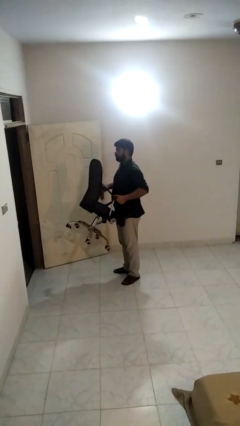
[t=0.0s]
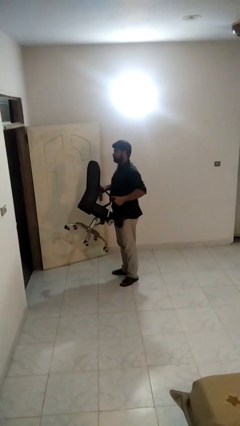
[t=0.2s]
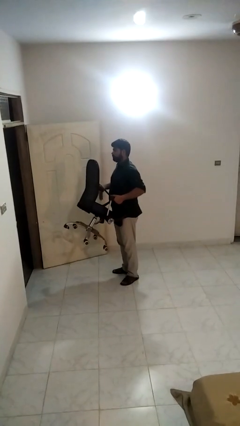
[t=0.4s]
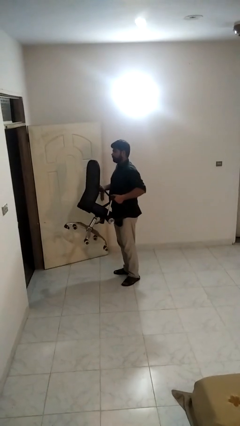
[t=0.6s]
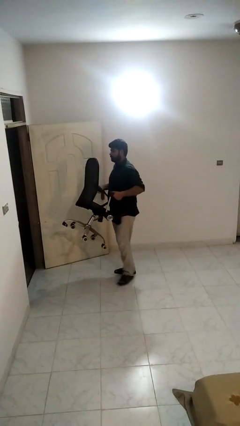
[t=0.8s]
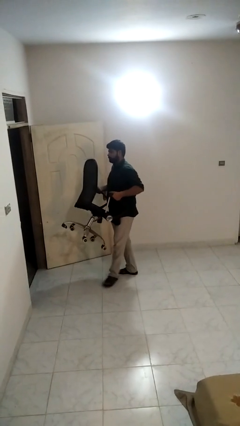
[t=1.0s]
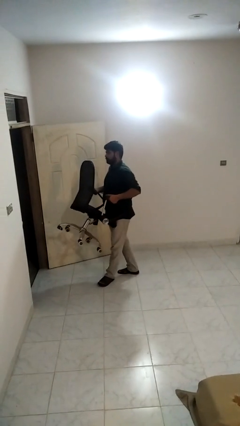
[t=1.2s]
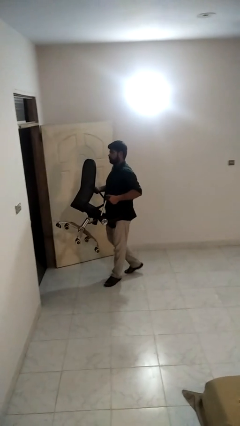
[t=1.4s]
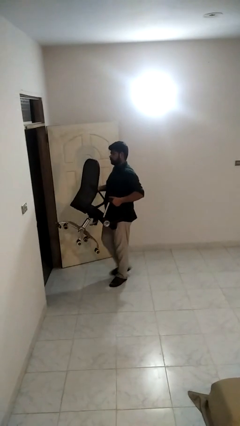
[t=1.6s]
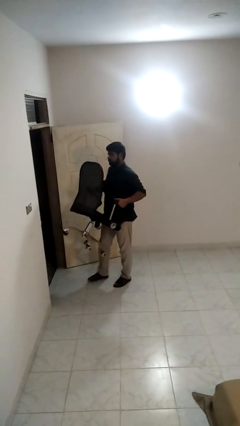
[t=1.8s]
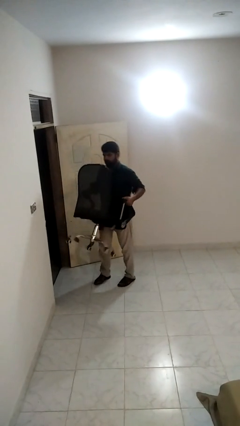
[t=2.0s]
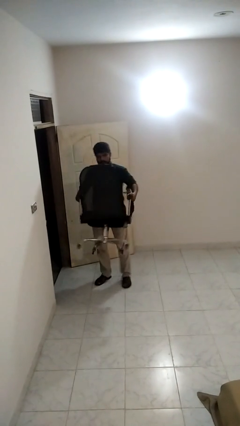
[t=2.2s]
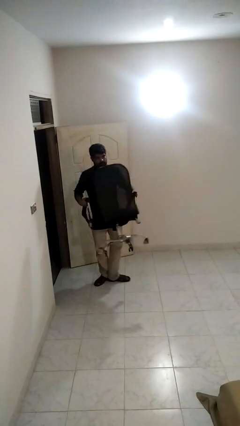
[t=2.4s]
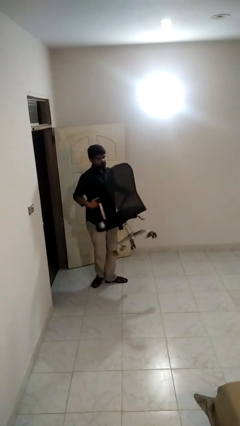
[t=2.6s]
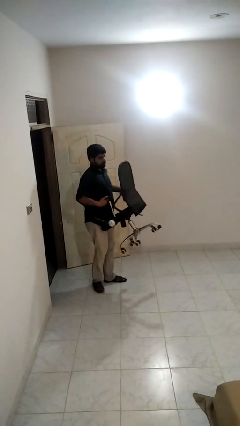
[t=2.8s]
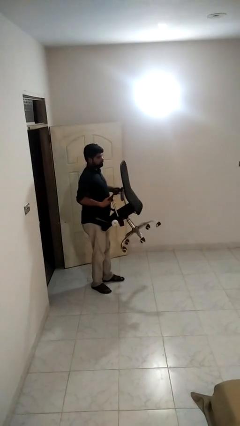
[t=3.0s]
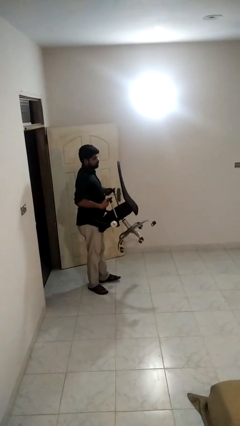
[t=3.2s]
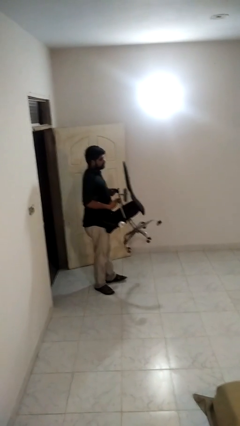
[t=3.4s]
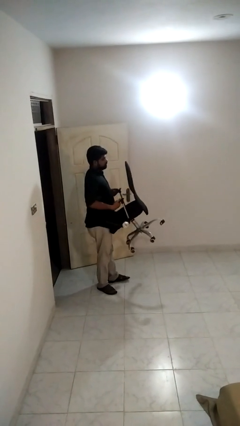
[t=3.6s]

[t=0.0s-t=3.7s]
person carries furniture

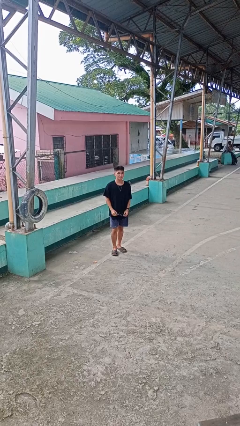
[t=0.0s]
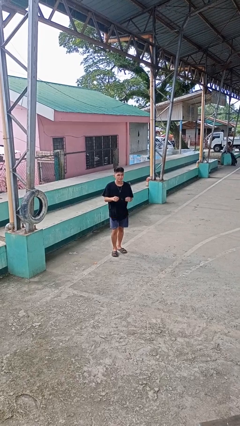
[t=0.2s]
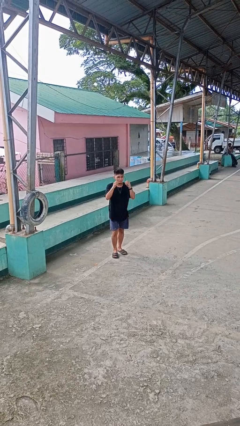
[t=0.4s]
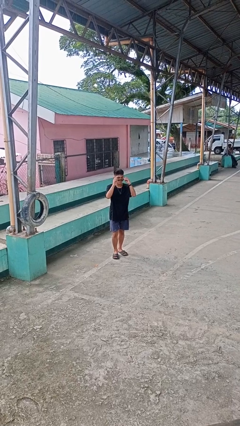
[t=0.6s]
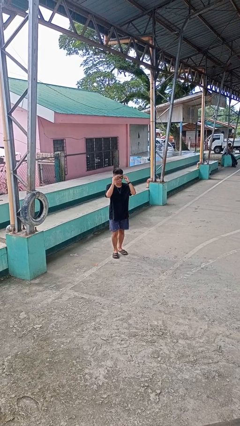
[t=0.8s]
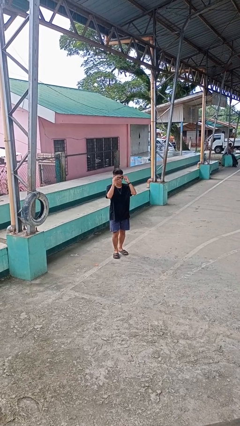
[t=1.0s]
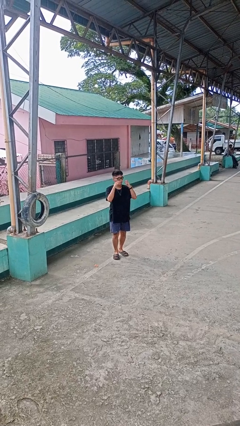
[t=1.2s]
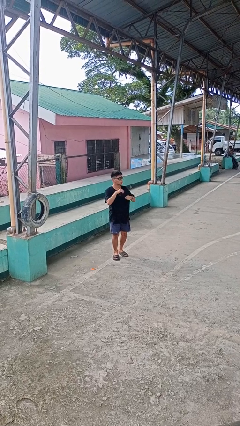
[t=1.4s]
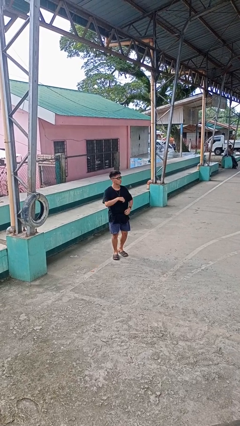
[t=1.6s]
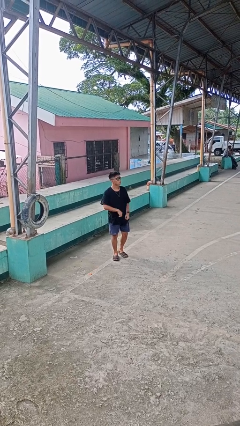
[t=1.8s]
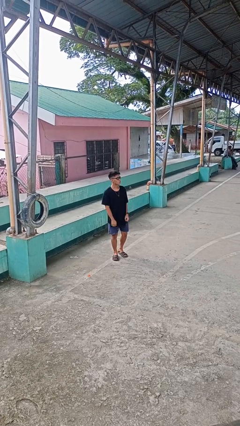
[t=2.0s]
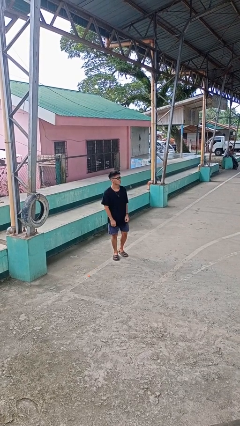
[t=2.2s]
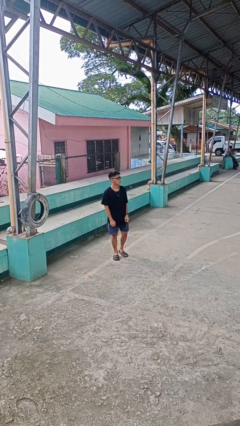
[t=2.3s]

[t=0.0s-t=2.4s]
person puts on sunglasses

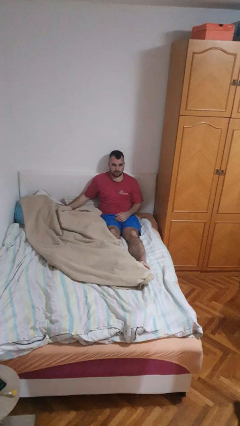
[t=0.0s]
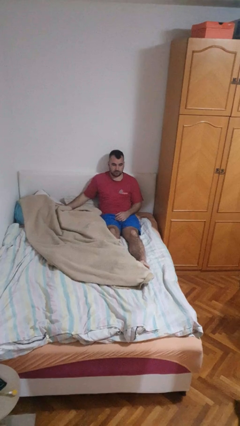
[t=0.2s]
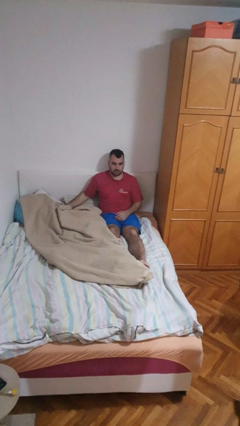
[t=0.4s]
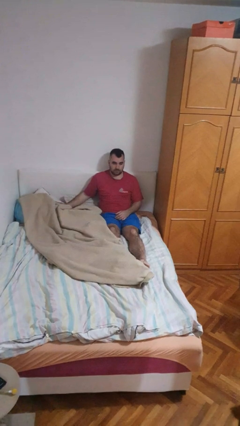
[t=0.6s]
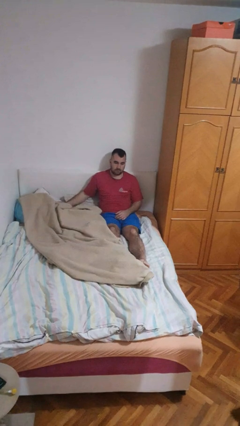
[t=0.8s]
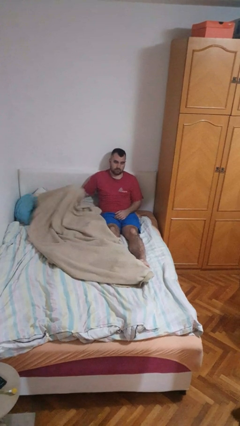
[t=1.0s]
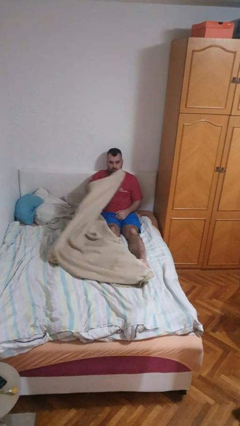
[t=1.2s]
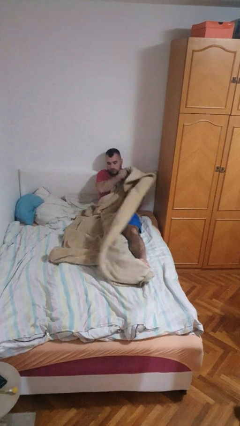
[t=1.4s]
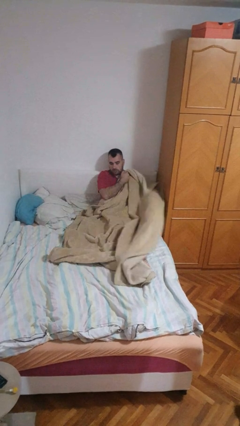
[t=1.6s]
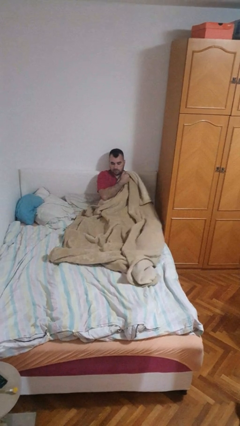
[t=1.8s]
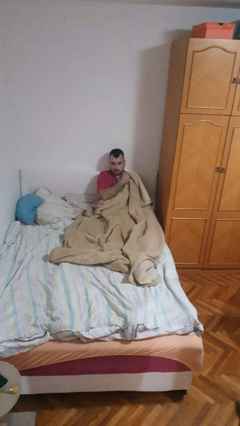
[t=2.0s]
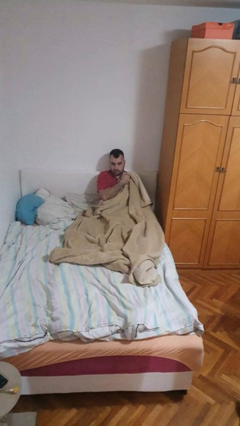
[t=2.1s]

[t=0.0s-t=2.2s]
person covers with blanket

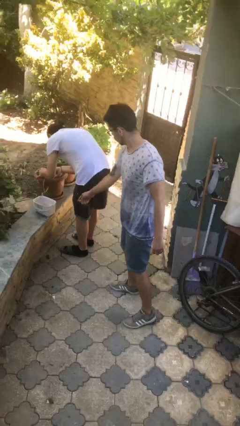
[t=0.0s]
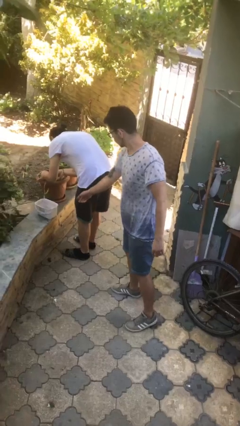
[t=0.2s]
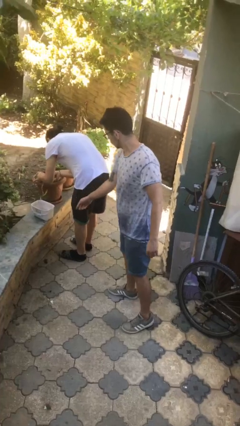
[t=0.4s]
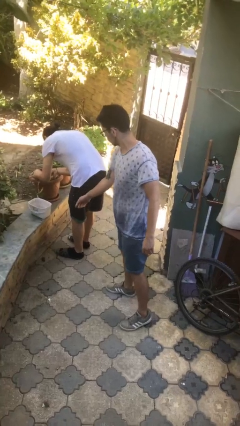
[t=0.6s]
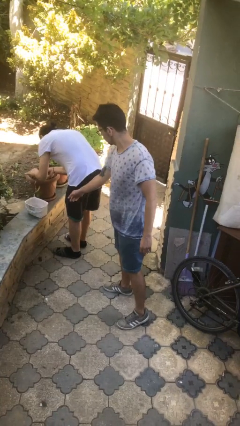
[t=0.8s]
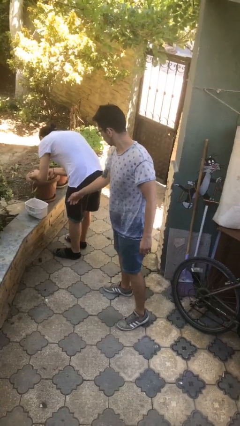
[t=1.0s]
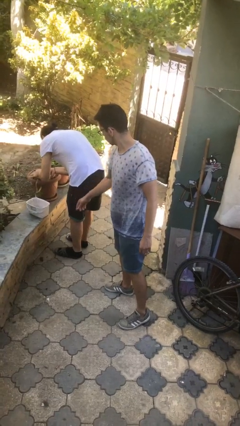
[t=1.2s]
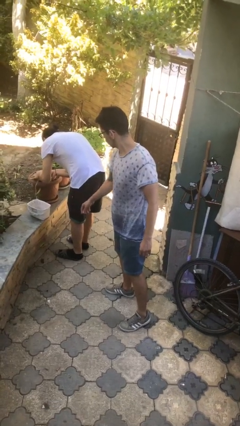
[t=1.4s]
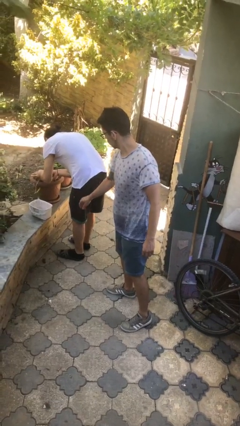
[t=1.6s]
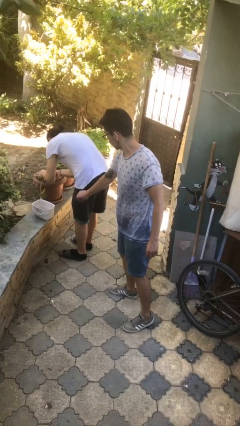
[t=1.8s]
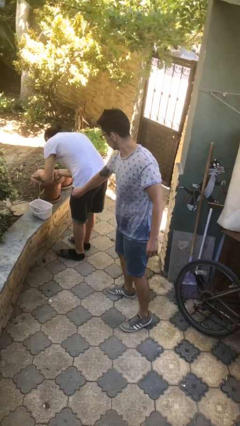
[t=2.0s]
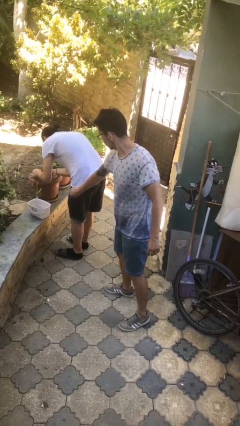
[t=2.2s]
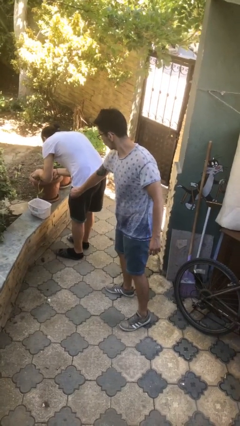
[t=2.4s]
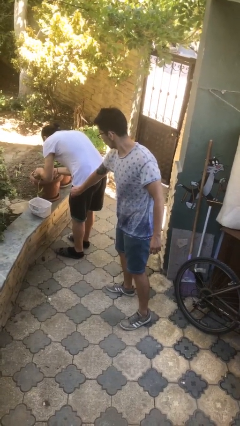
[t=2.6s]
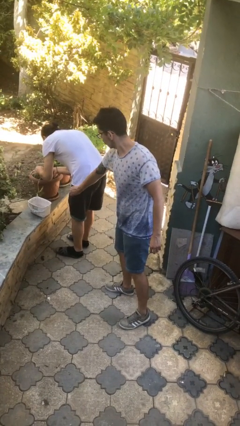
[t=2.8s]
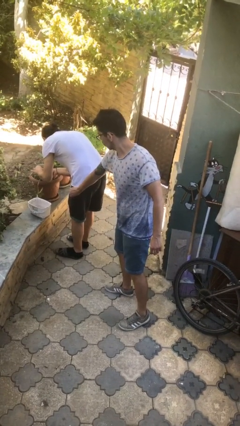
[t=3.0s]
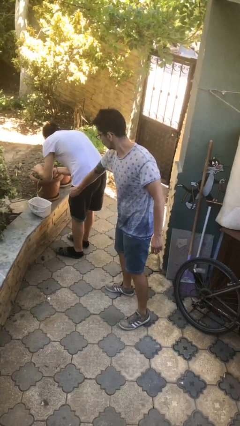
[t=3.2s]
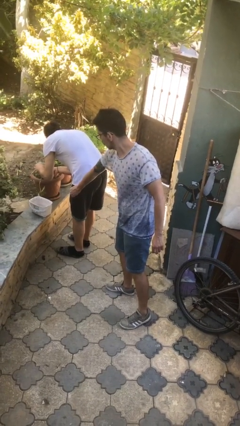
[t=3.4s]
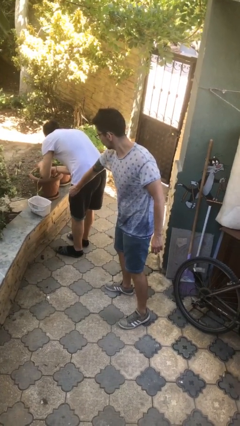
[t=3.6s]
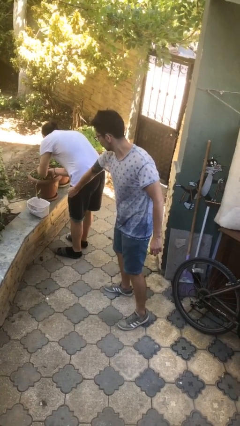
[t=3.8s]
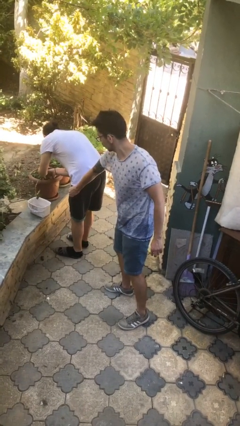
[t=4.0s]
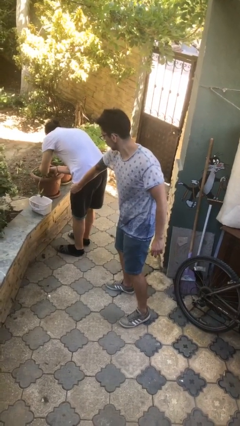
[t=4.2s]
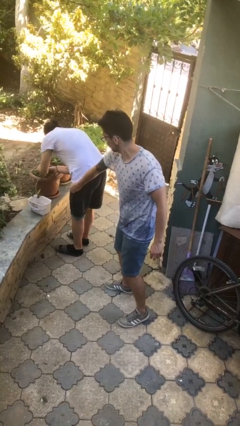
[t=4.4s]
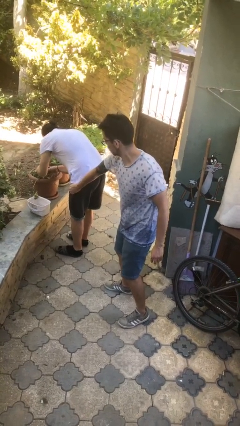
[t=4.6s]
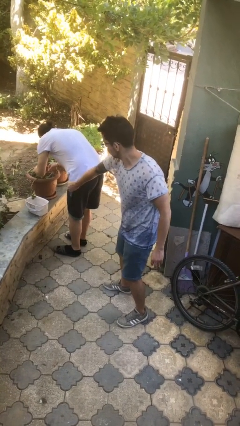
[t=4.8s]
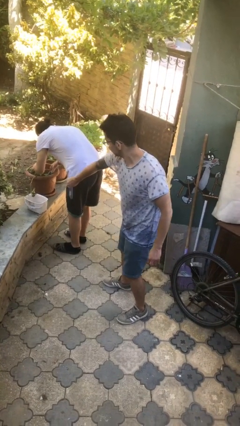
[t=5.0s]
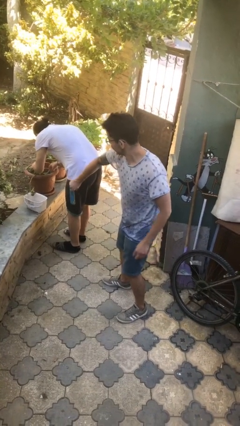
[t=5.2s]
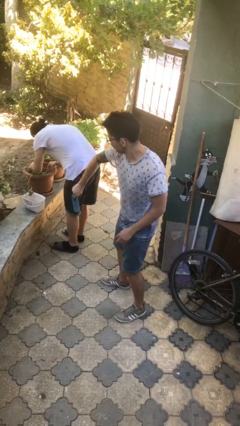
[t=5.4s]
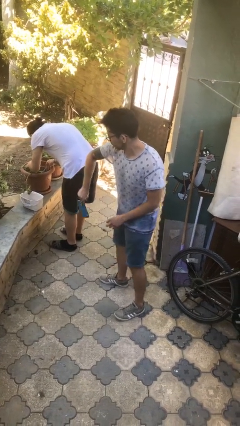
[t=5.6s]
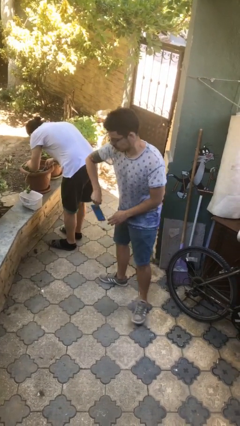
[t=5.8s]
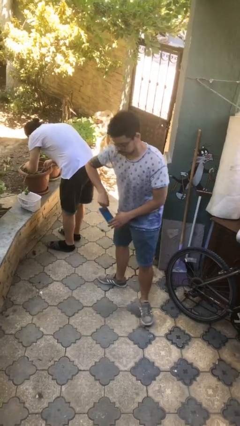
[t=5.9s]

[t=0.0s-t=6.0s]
person steals object from person

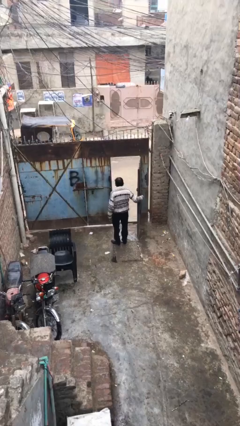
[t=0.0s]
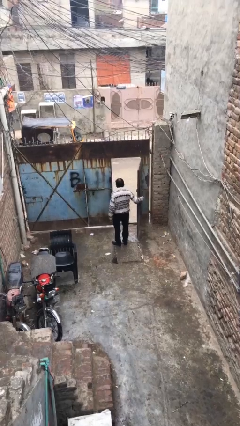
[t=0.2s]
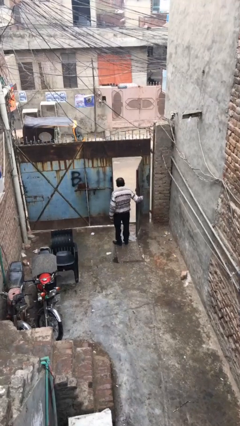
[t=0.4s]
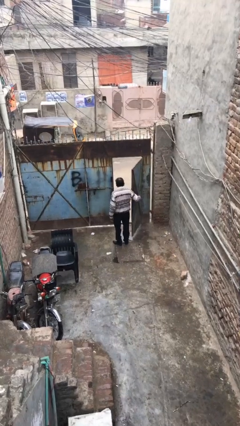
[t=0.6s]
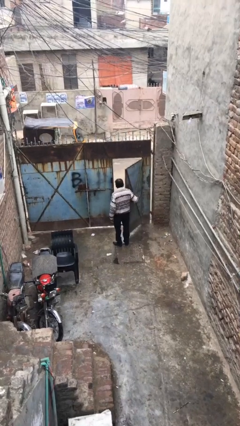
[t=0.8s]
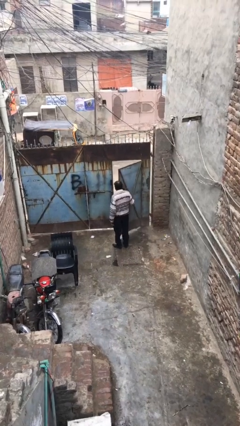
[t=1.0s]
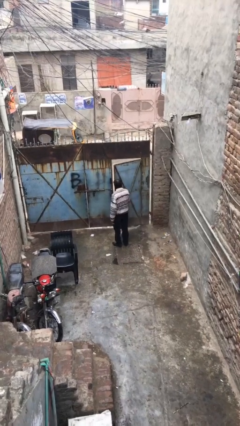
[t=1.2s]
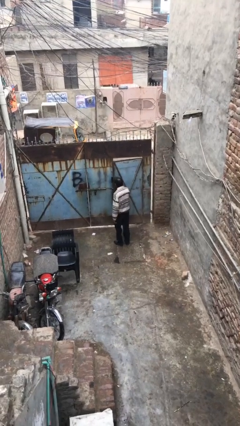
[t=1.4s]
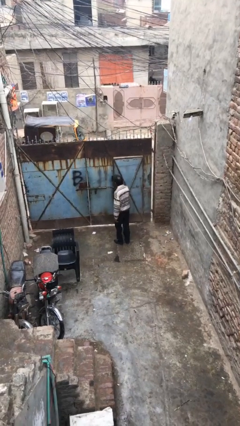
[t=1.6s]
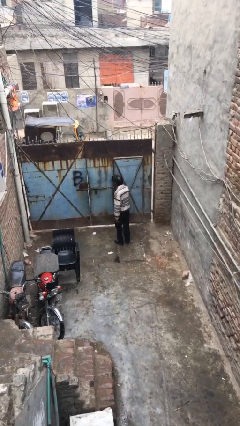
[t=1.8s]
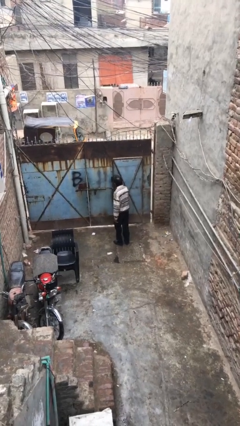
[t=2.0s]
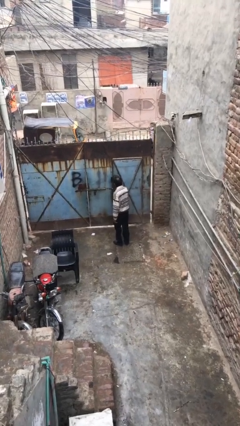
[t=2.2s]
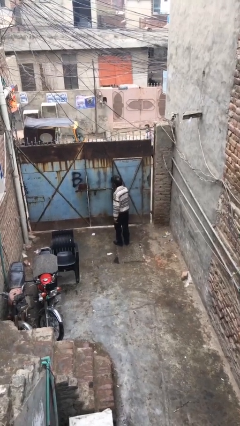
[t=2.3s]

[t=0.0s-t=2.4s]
person closes facility door

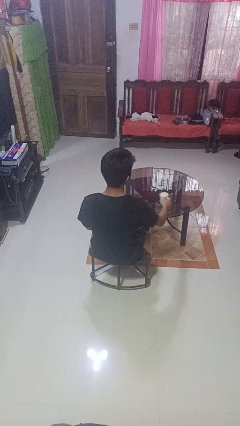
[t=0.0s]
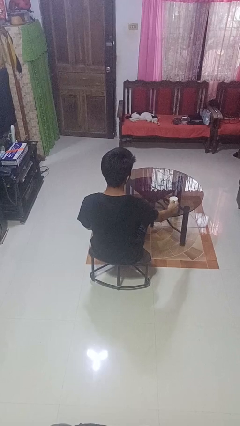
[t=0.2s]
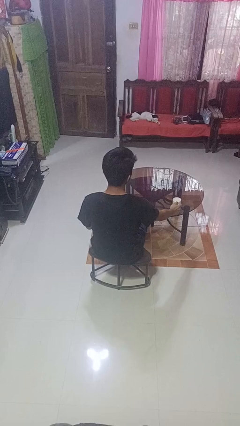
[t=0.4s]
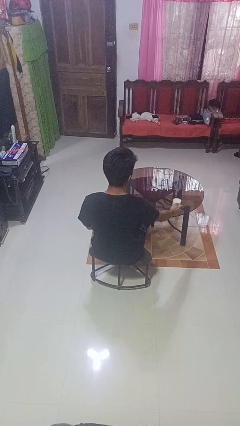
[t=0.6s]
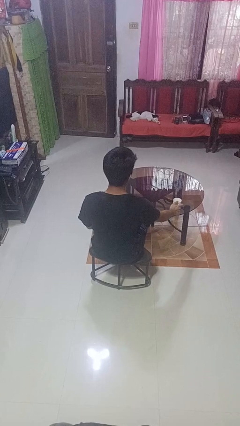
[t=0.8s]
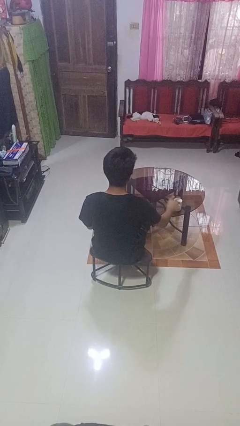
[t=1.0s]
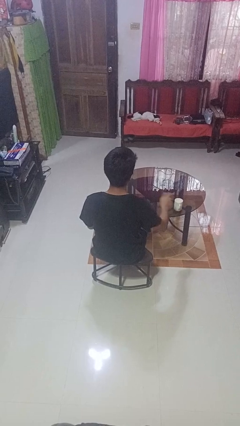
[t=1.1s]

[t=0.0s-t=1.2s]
person puts down object on table
